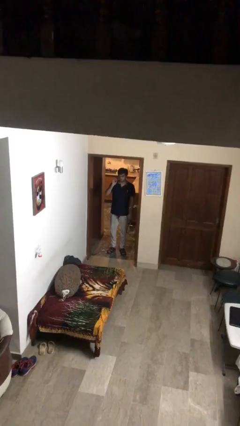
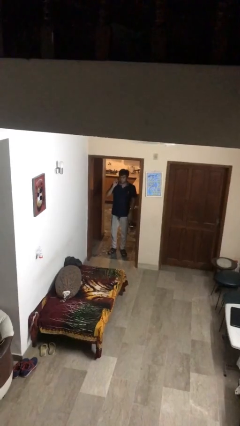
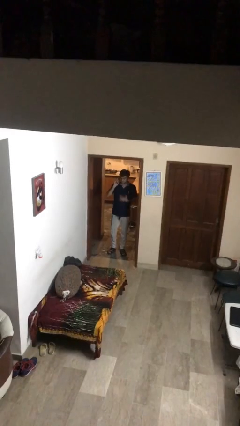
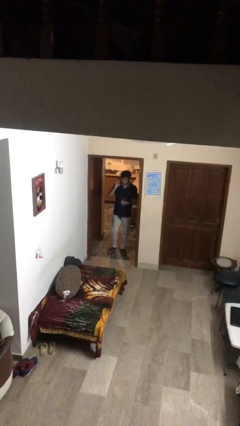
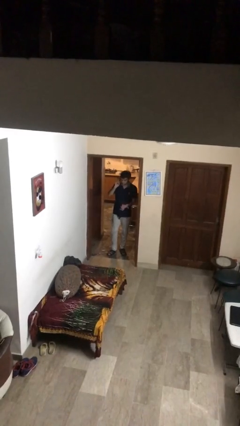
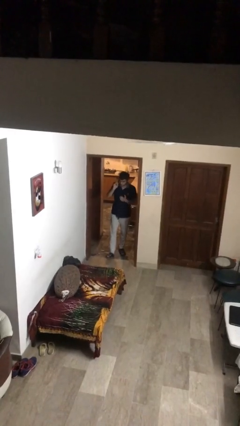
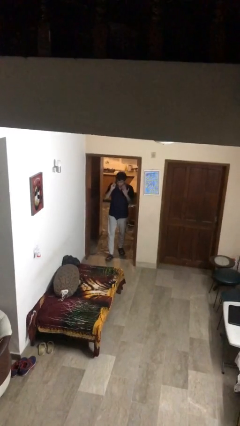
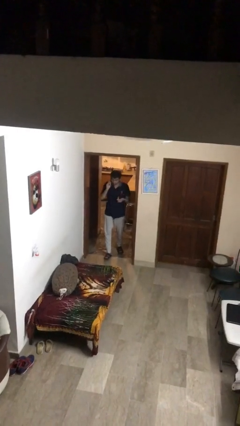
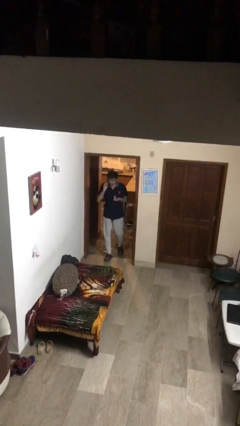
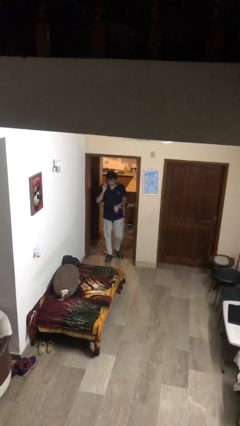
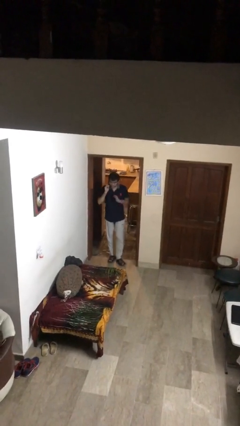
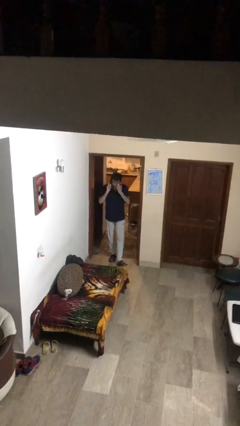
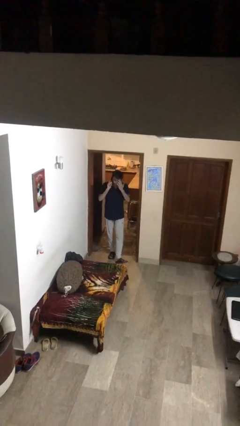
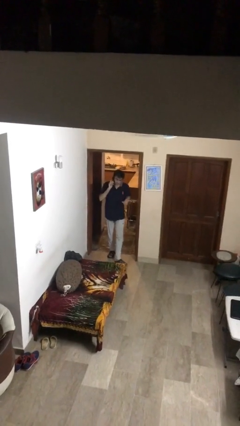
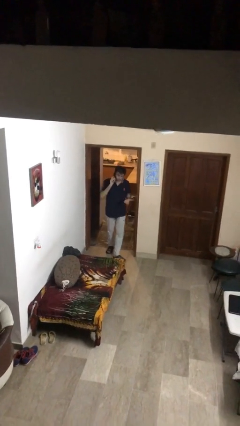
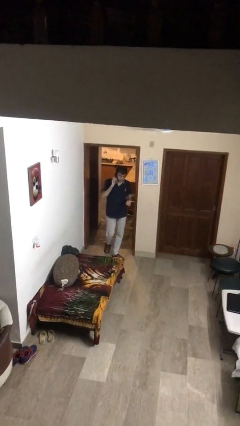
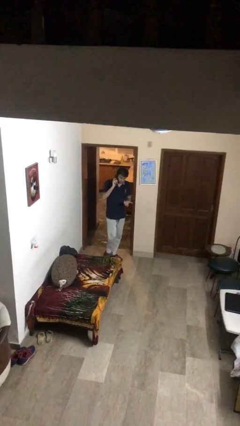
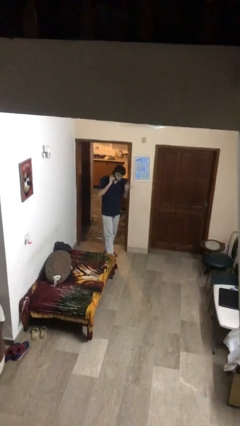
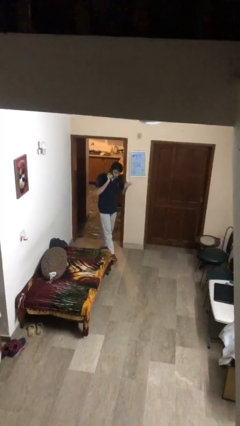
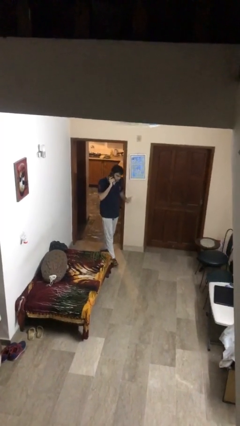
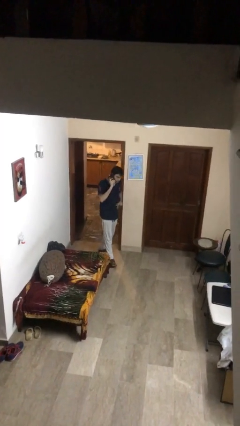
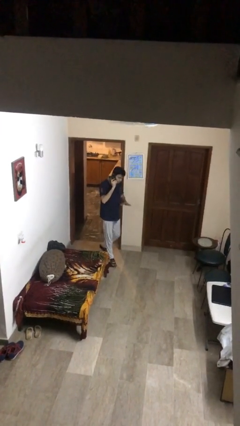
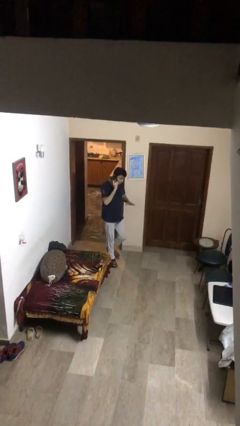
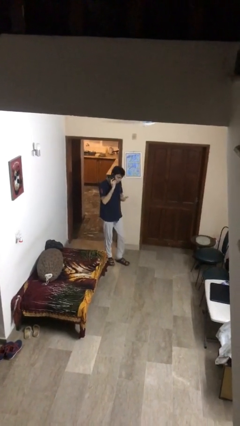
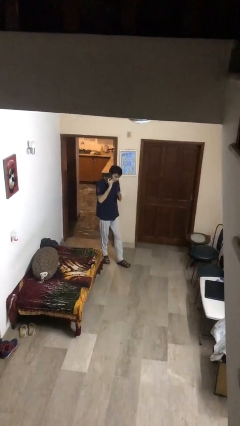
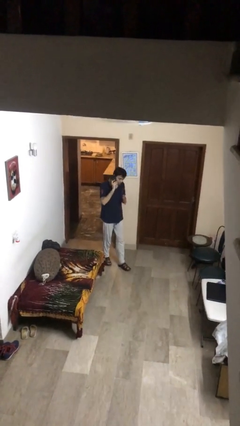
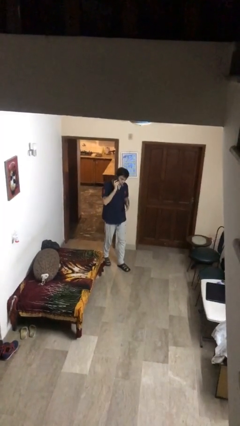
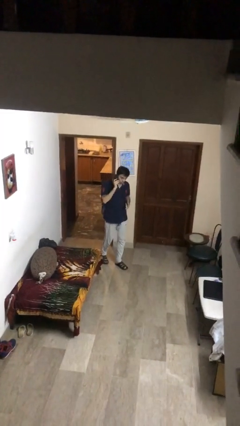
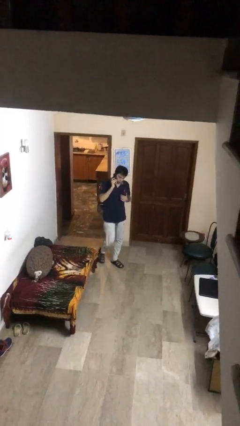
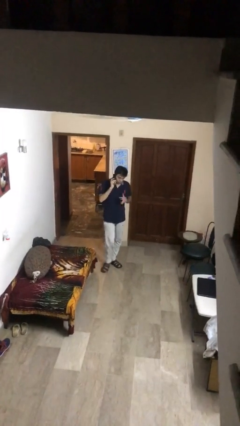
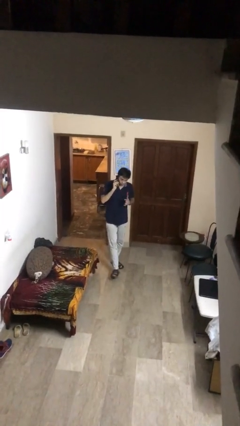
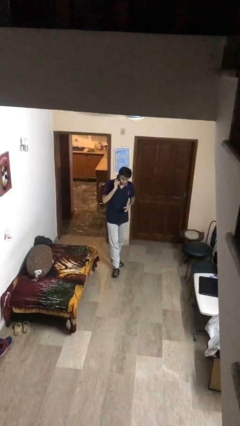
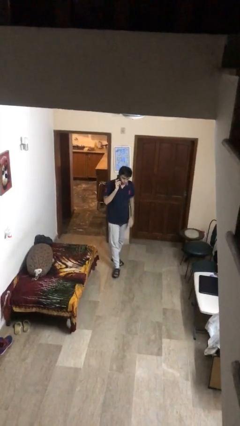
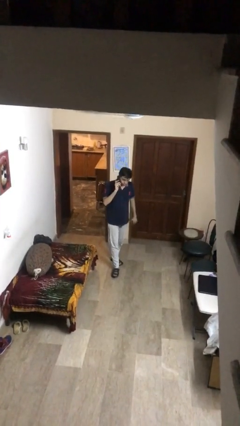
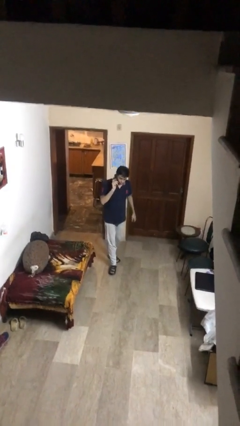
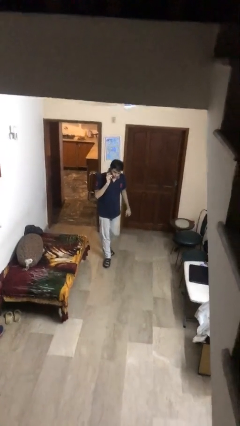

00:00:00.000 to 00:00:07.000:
person enters scene through structure

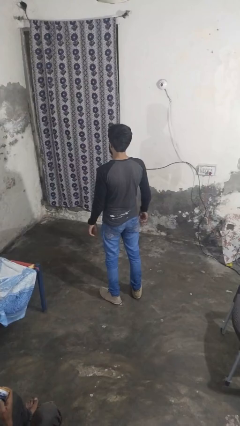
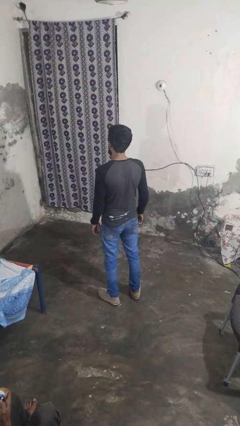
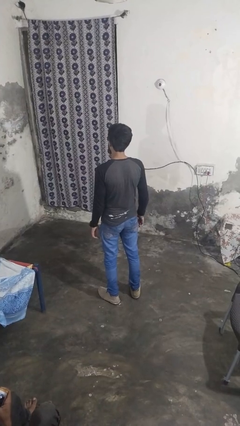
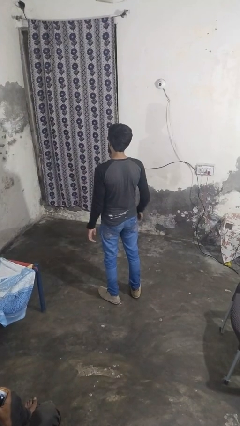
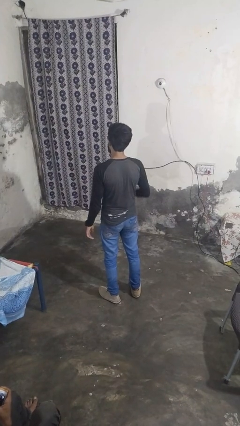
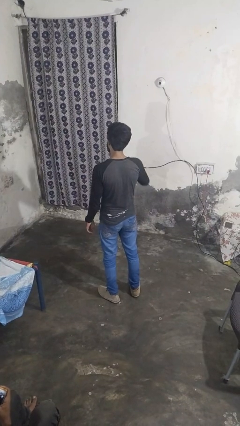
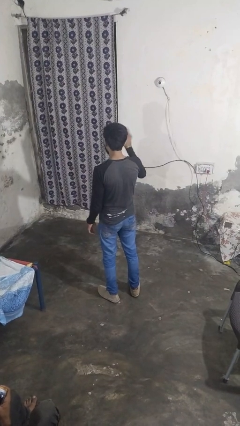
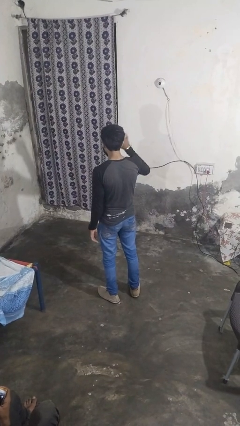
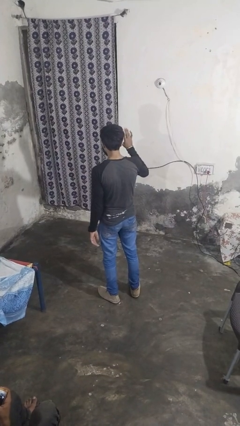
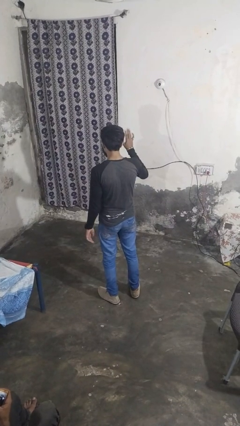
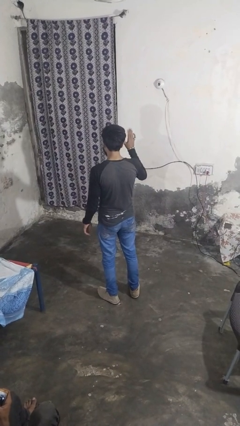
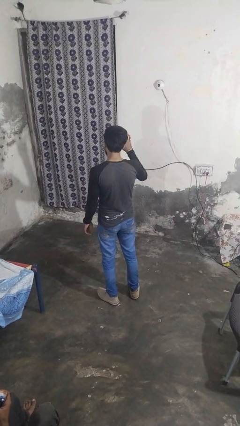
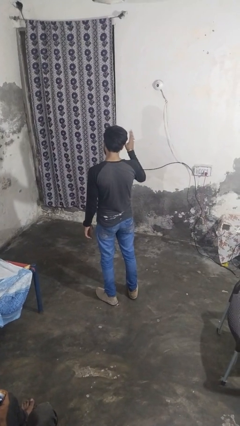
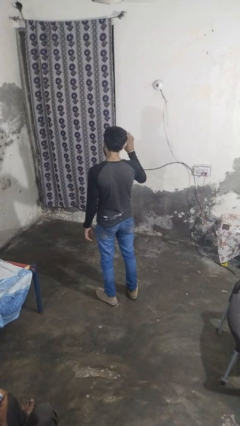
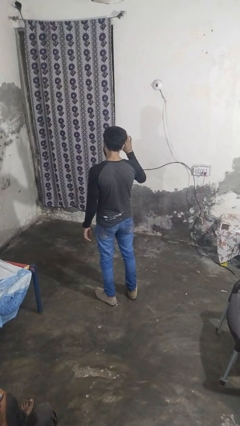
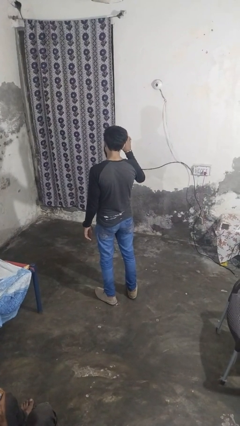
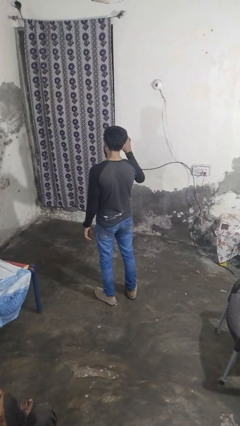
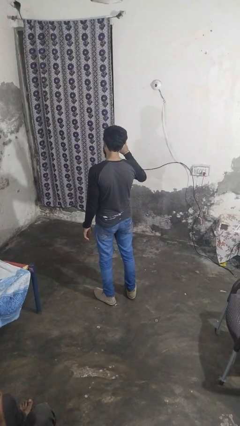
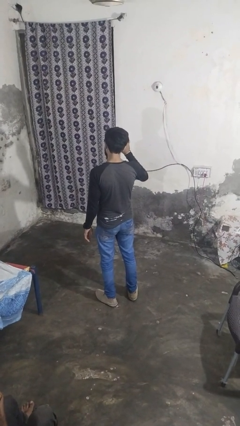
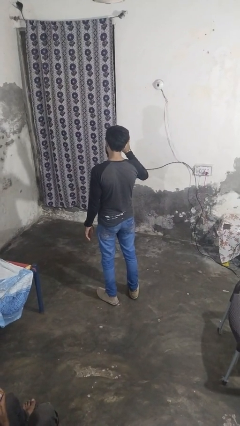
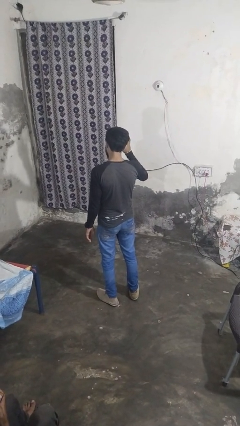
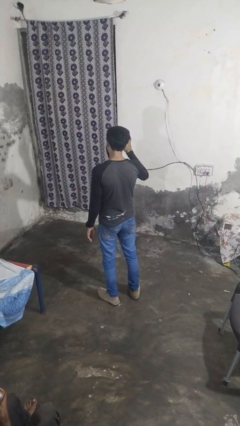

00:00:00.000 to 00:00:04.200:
person waves at person

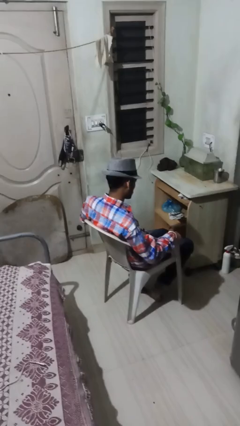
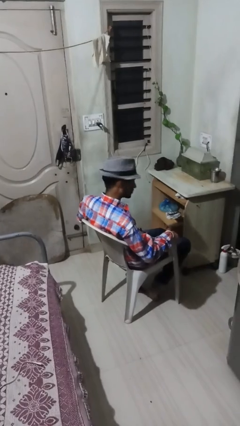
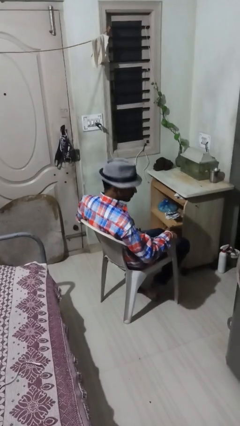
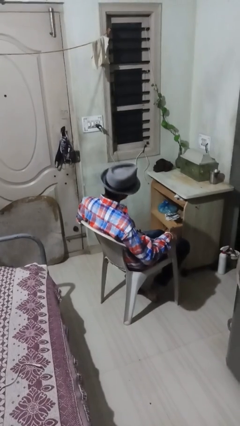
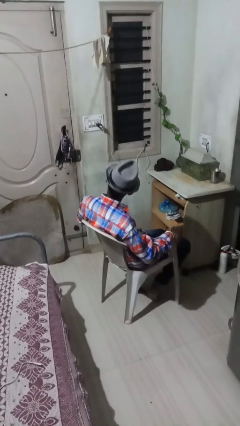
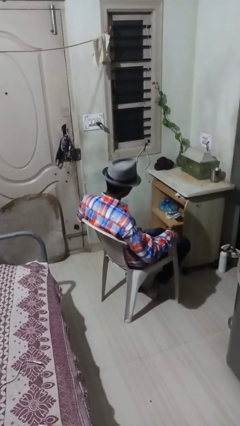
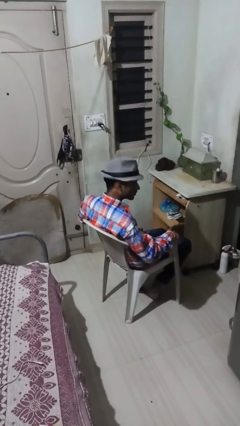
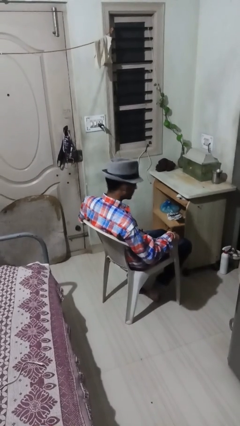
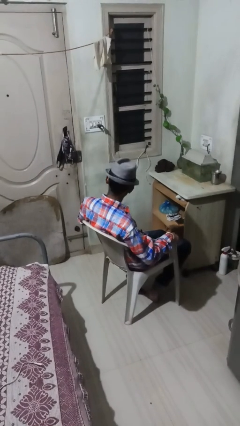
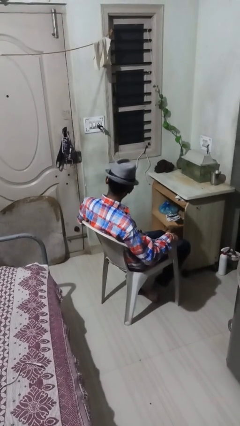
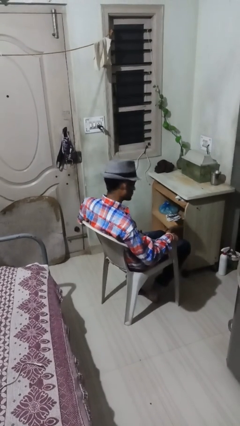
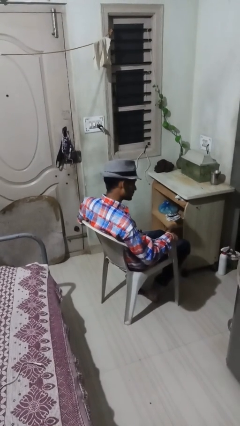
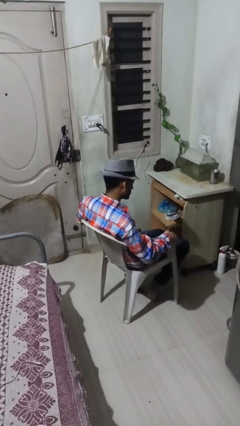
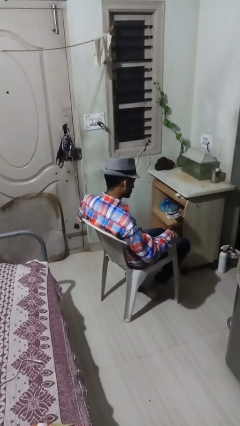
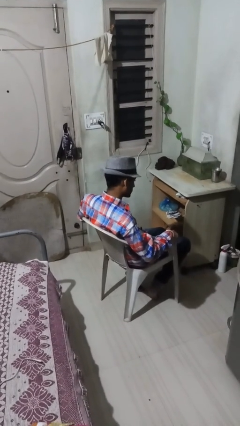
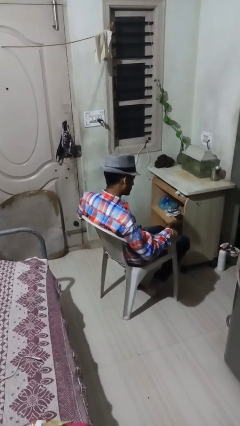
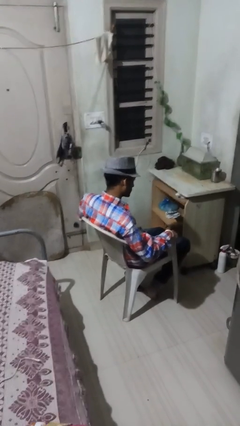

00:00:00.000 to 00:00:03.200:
person shakes head

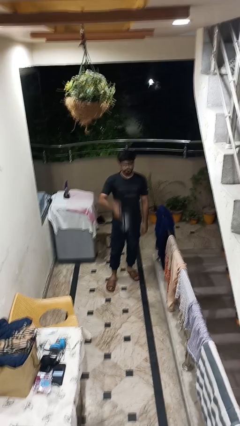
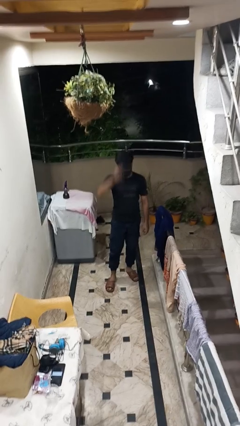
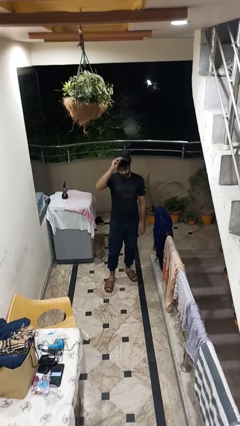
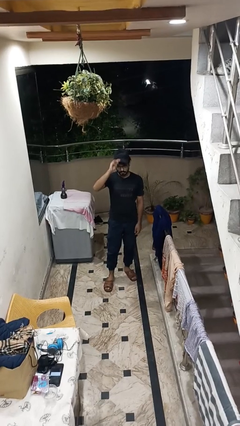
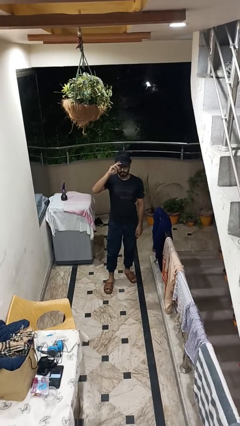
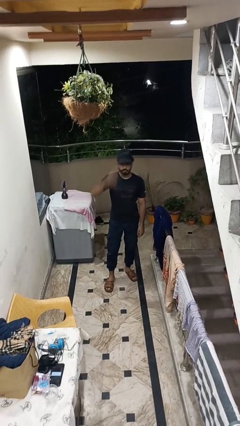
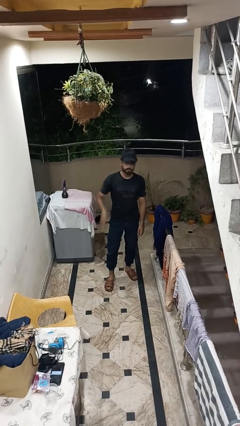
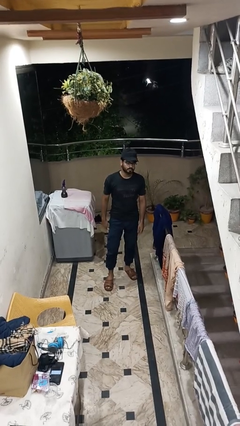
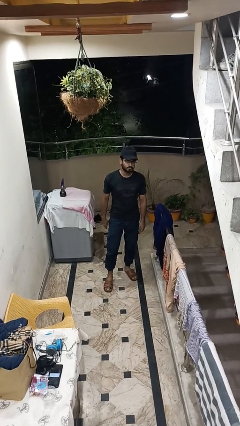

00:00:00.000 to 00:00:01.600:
person puts on hat

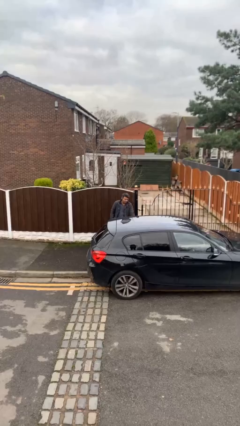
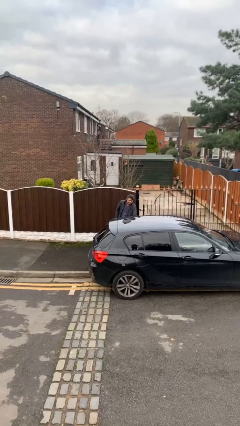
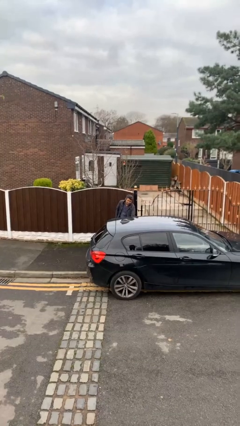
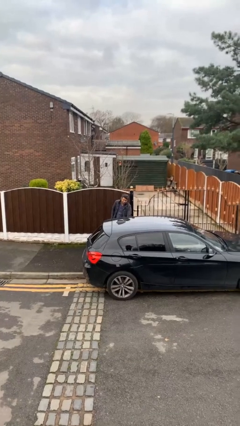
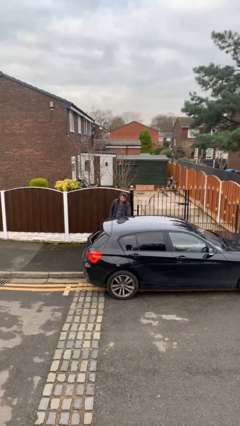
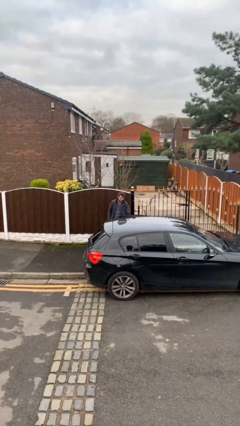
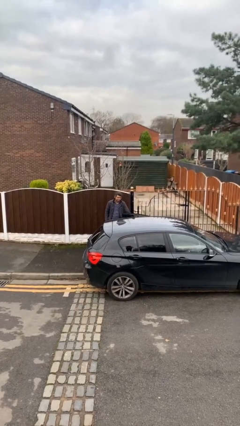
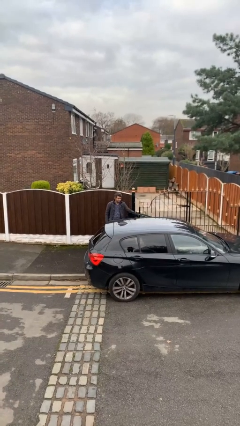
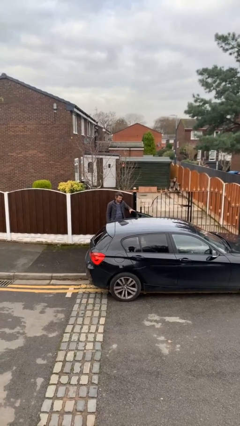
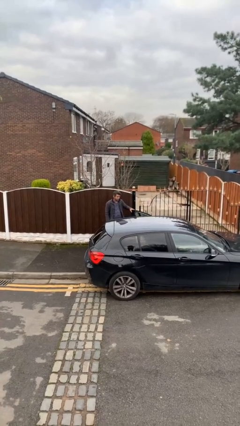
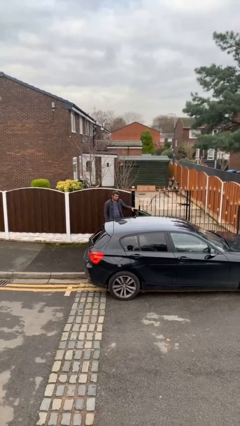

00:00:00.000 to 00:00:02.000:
person opens car door
